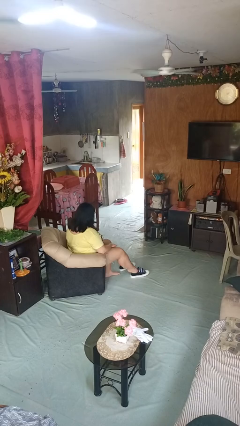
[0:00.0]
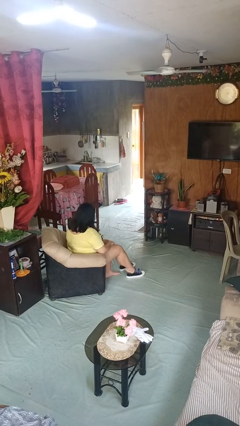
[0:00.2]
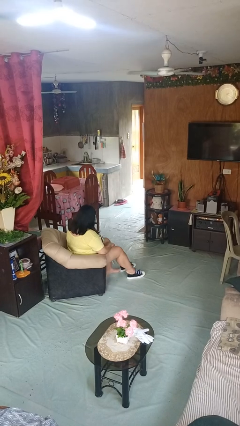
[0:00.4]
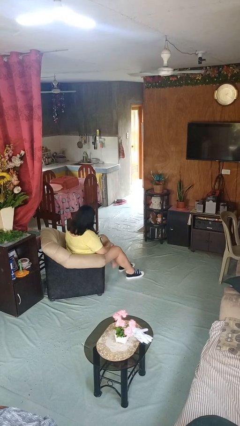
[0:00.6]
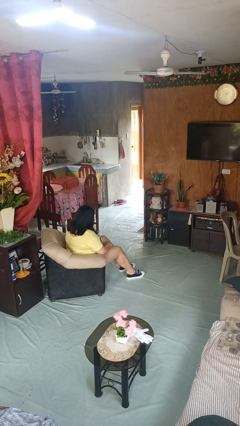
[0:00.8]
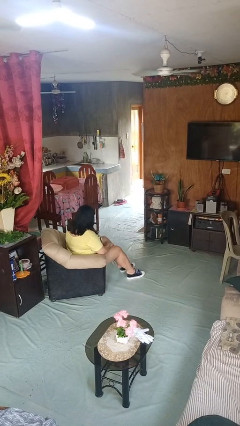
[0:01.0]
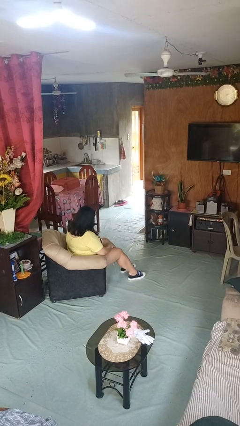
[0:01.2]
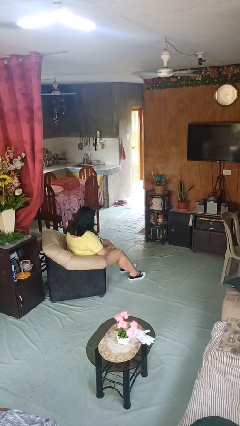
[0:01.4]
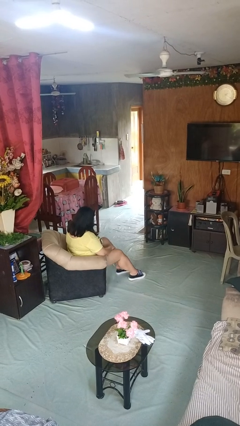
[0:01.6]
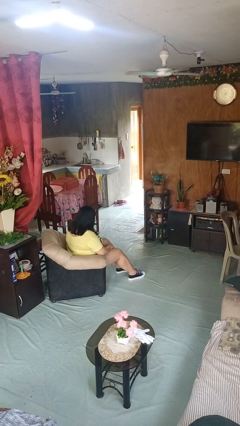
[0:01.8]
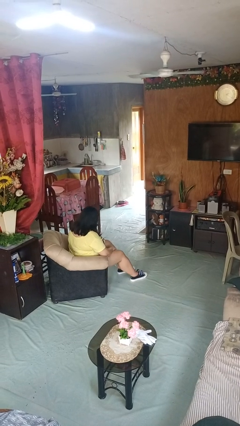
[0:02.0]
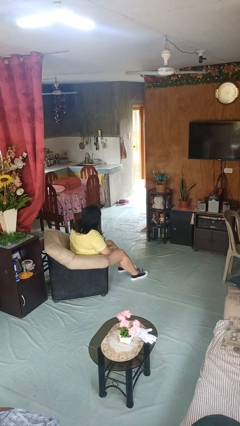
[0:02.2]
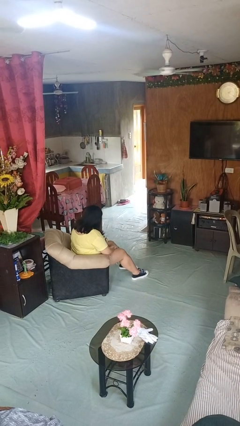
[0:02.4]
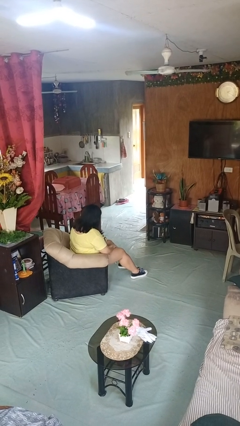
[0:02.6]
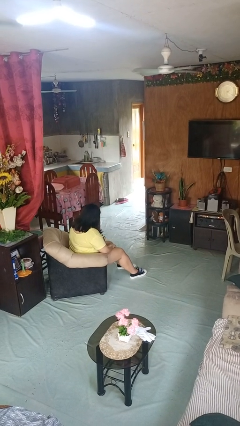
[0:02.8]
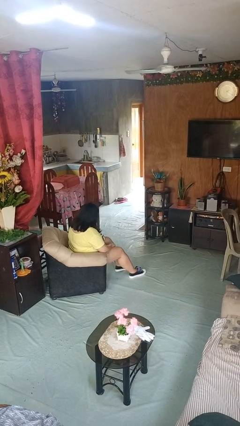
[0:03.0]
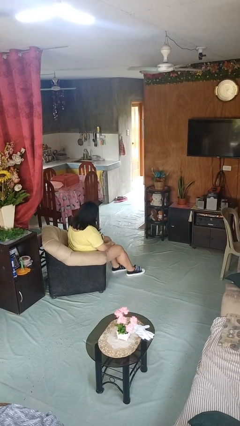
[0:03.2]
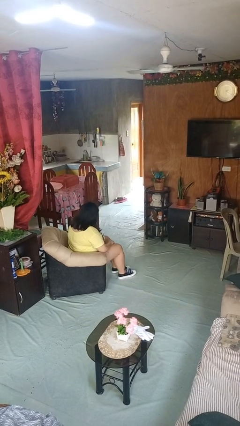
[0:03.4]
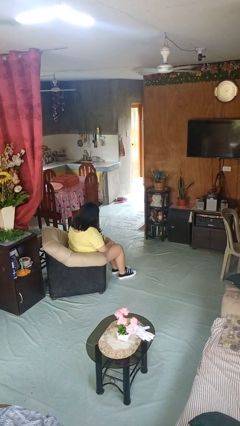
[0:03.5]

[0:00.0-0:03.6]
person puts on shoes

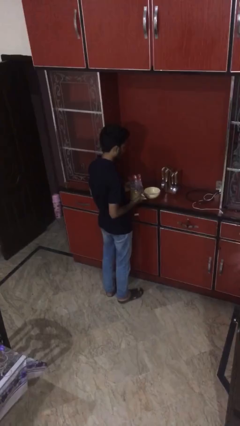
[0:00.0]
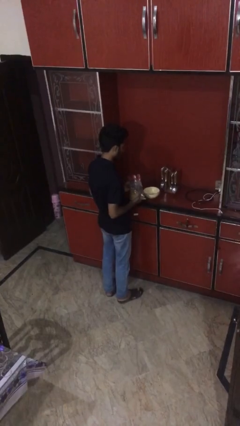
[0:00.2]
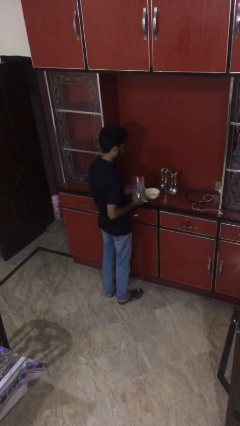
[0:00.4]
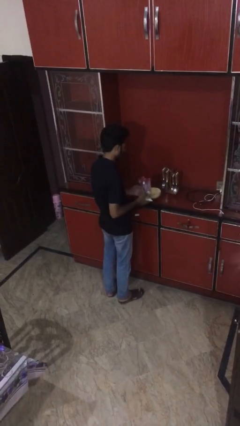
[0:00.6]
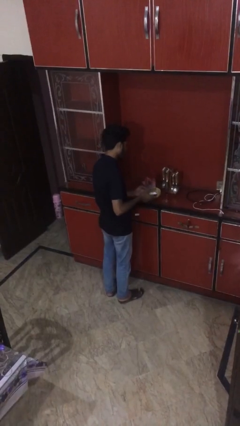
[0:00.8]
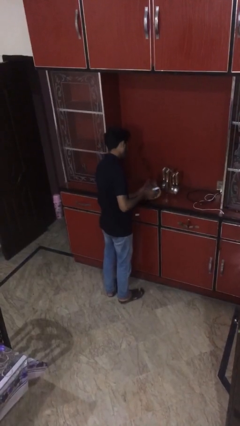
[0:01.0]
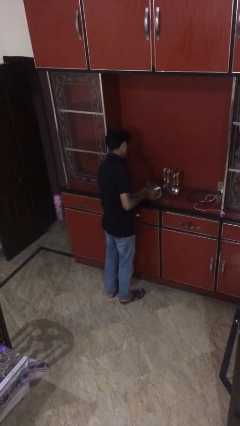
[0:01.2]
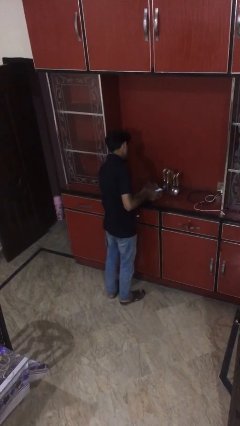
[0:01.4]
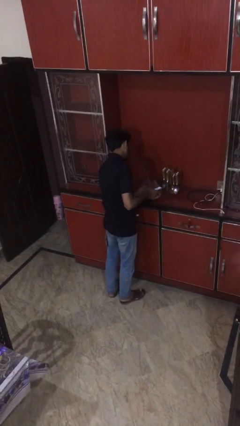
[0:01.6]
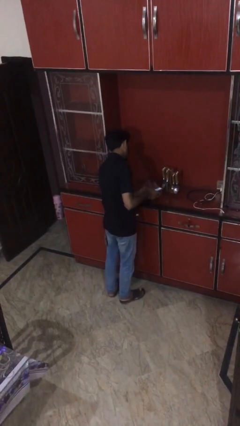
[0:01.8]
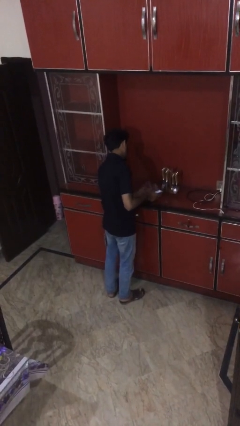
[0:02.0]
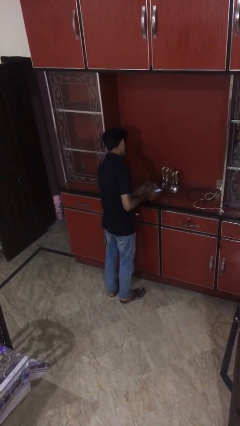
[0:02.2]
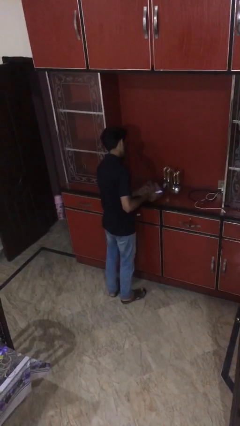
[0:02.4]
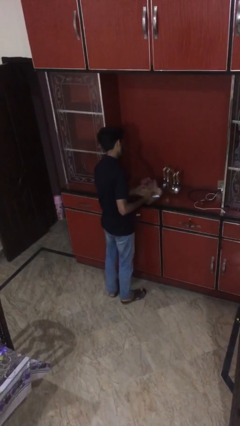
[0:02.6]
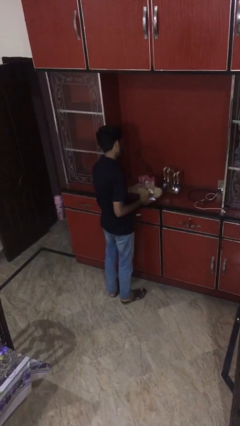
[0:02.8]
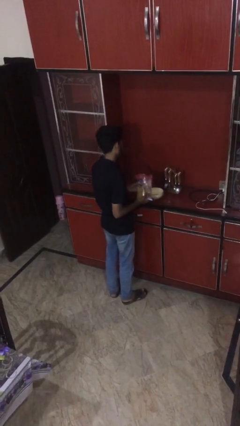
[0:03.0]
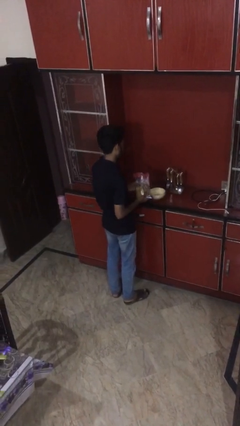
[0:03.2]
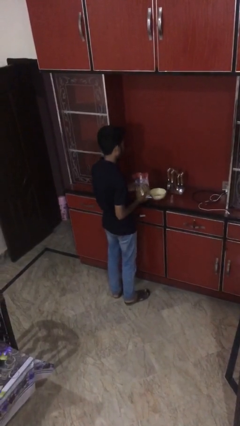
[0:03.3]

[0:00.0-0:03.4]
person pours into bowl

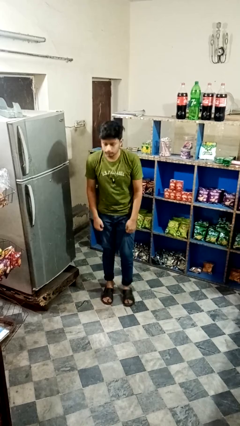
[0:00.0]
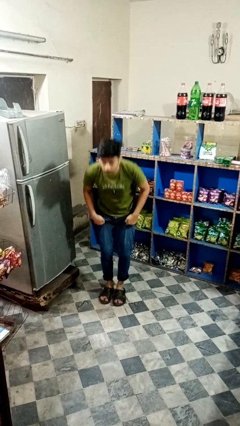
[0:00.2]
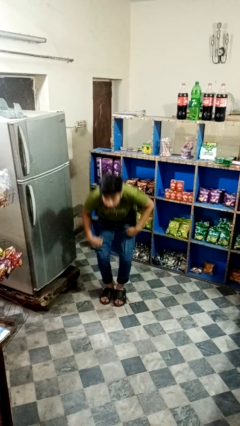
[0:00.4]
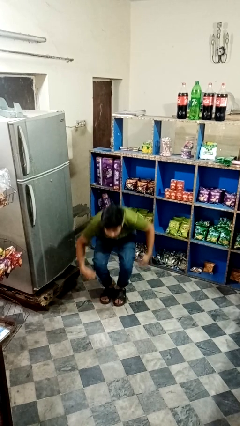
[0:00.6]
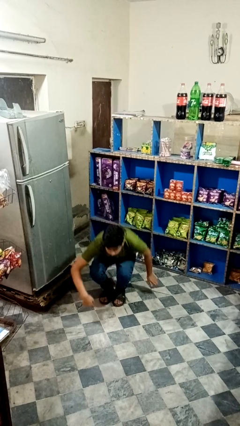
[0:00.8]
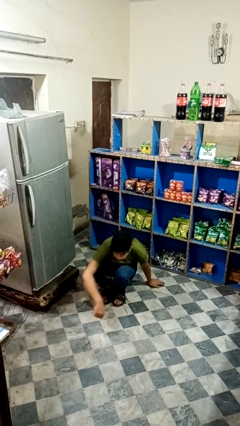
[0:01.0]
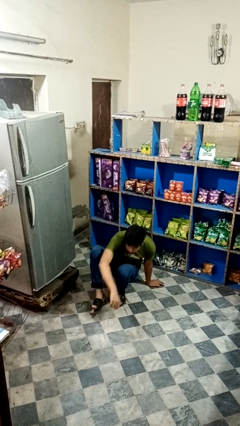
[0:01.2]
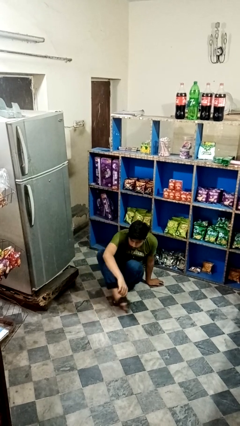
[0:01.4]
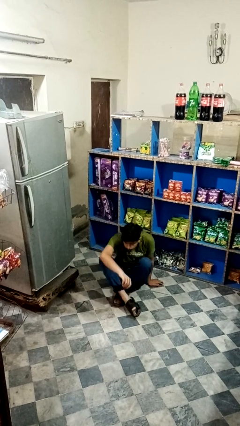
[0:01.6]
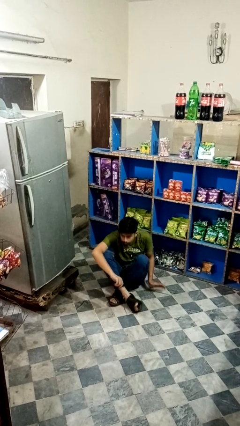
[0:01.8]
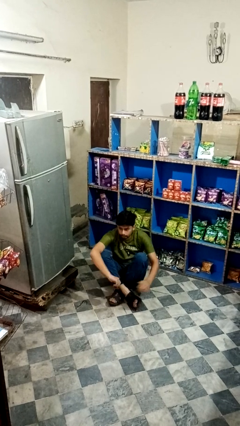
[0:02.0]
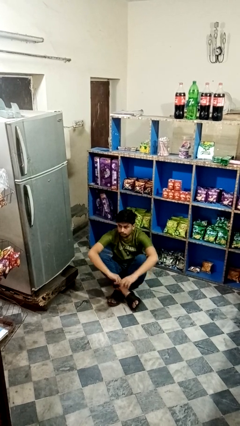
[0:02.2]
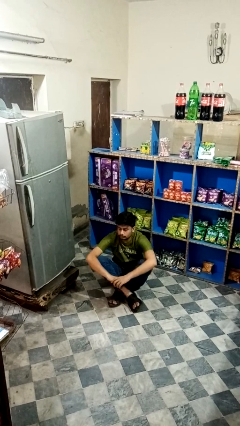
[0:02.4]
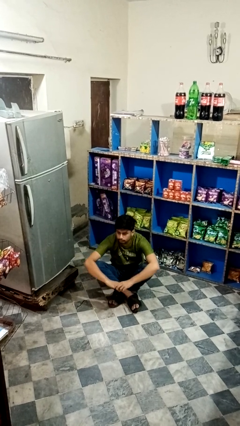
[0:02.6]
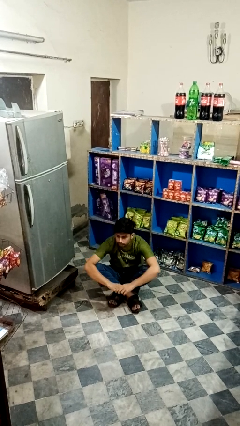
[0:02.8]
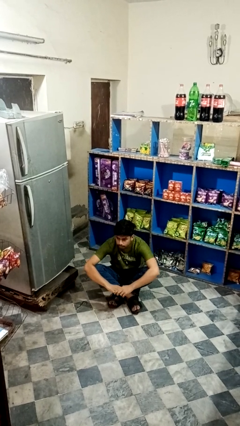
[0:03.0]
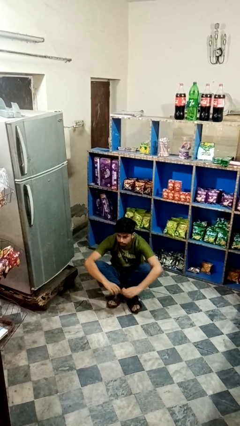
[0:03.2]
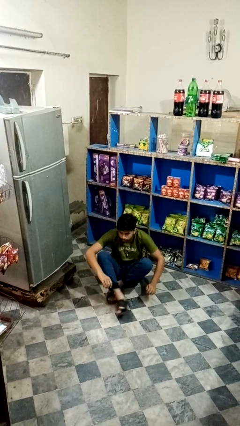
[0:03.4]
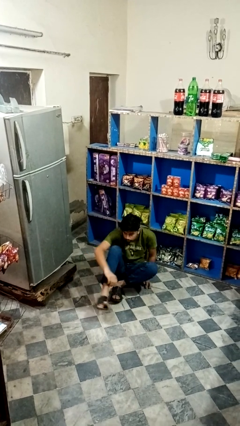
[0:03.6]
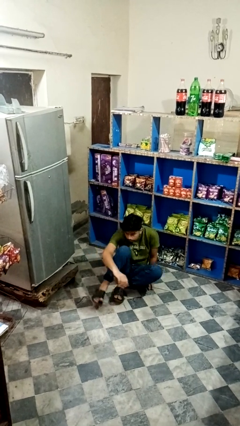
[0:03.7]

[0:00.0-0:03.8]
person sits crisscross

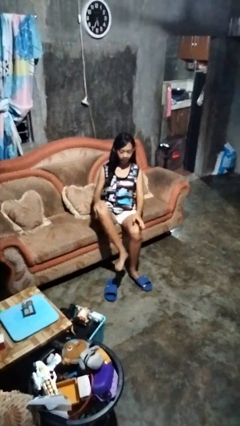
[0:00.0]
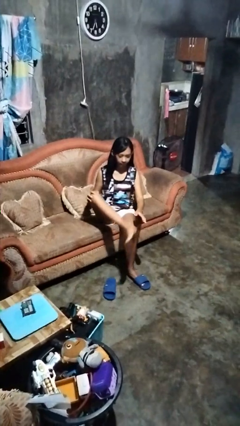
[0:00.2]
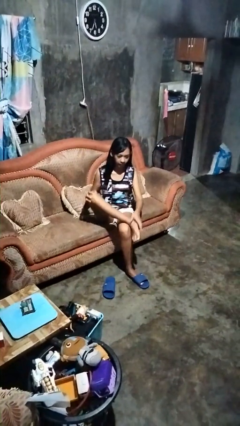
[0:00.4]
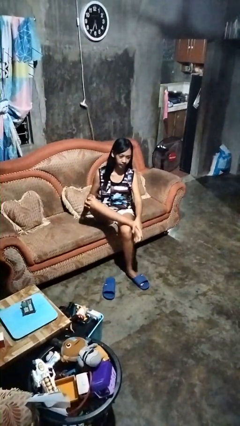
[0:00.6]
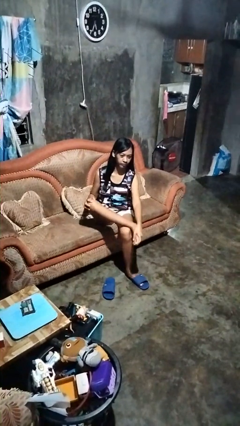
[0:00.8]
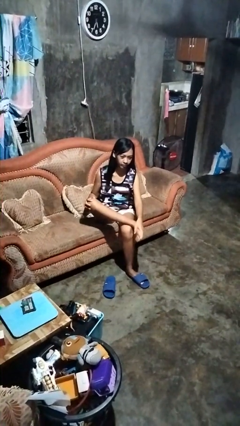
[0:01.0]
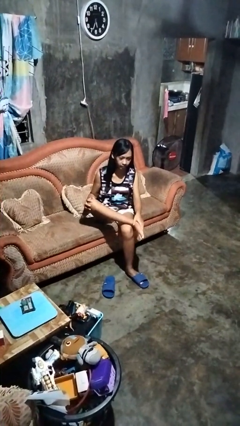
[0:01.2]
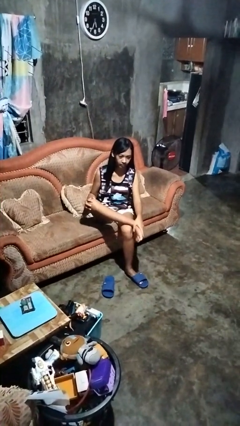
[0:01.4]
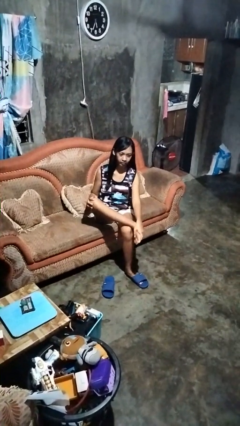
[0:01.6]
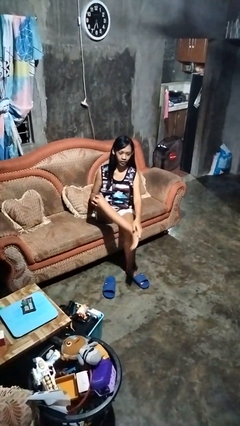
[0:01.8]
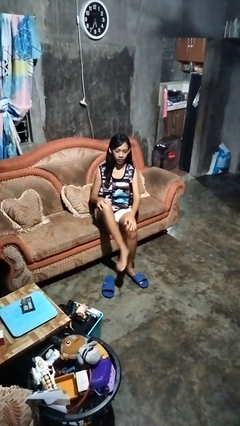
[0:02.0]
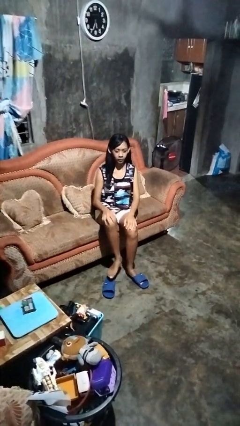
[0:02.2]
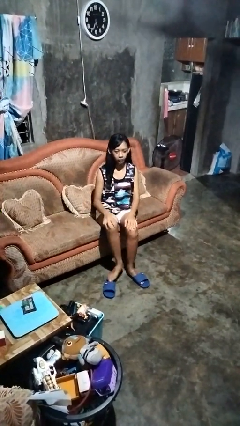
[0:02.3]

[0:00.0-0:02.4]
person rubs foot

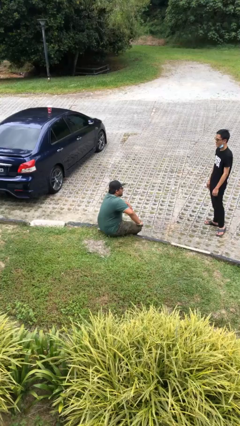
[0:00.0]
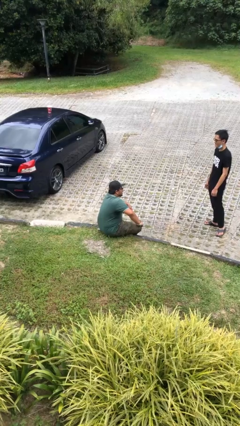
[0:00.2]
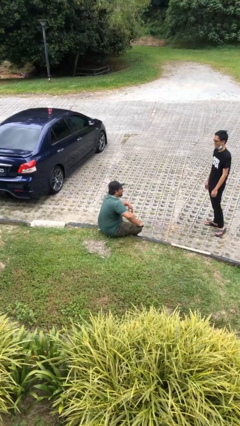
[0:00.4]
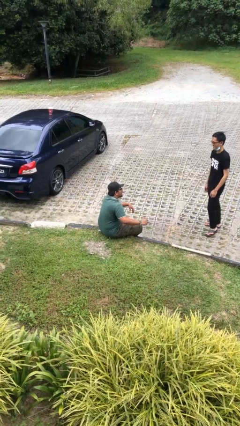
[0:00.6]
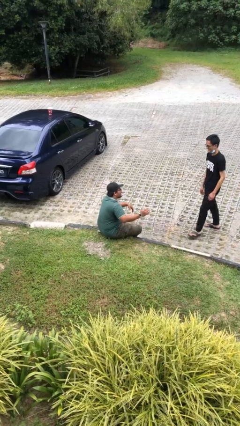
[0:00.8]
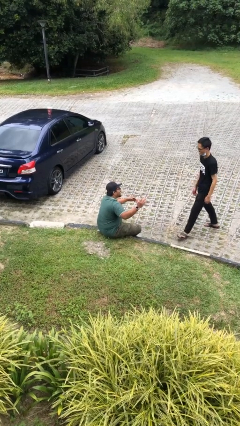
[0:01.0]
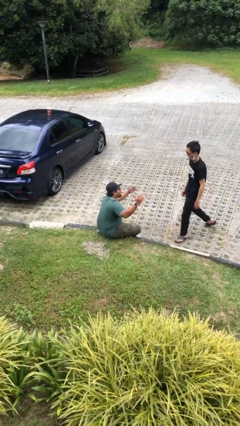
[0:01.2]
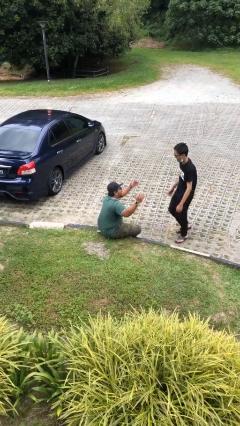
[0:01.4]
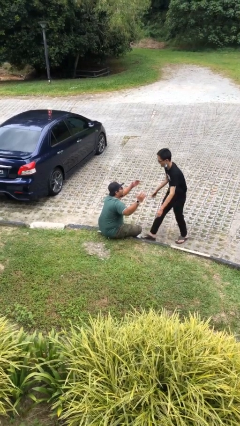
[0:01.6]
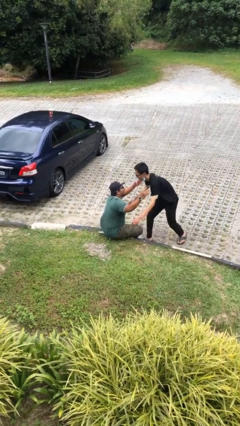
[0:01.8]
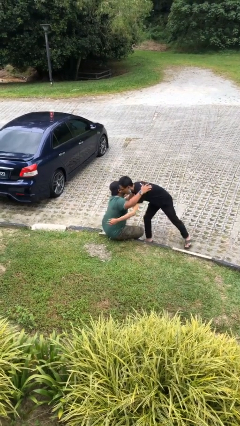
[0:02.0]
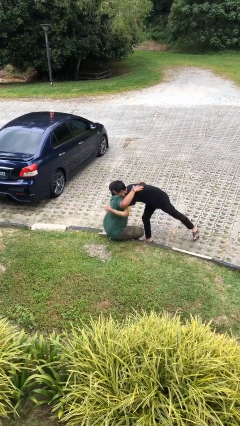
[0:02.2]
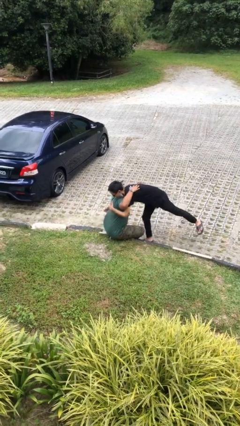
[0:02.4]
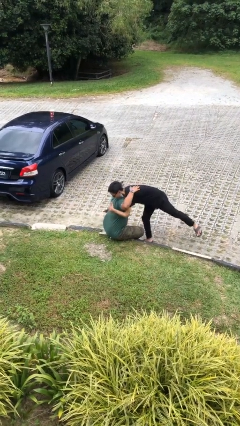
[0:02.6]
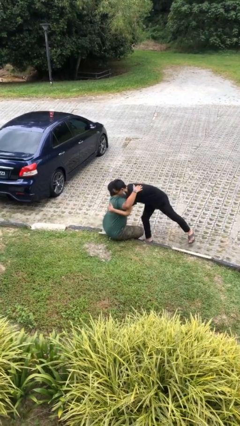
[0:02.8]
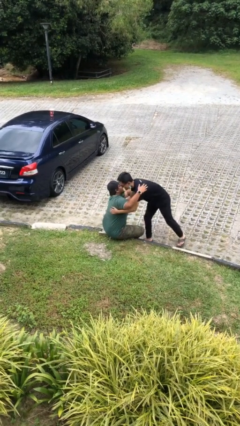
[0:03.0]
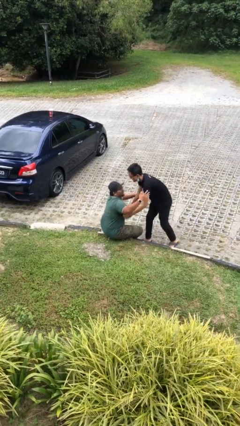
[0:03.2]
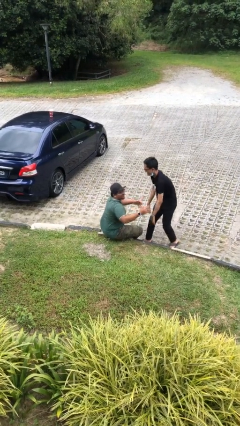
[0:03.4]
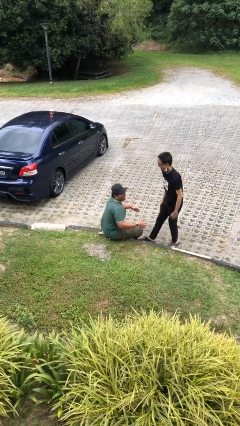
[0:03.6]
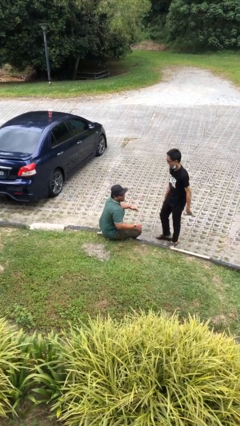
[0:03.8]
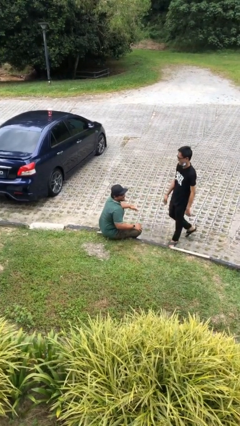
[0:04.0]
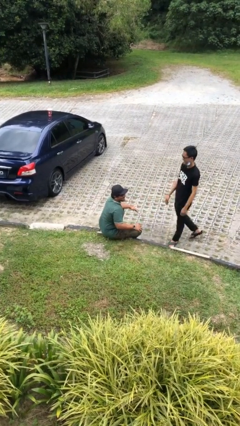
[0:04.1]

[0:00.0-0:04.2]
person embraces person

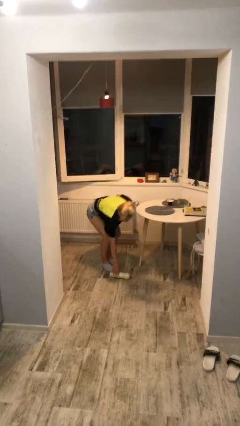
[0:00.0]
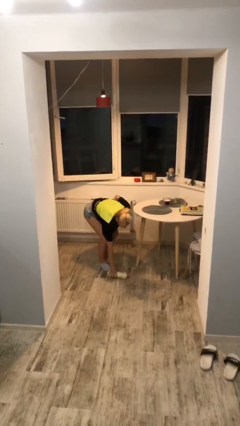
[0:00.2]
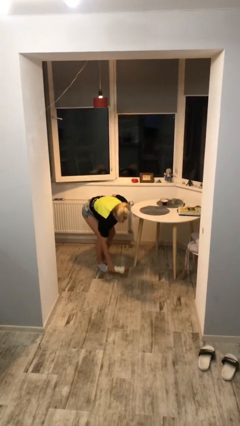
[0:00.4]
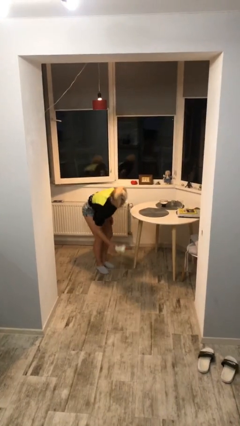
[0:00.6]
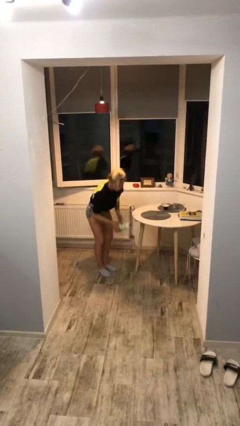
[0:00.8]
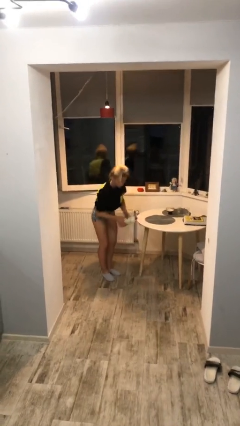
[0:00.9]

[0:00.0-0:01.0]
person picks up object from floor
